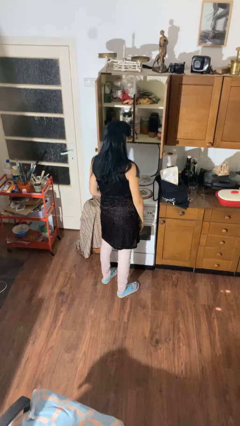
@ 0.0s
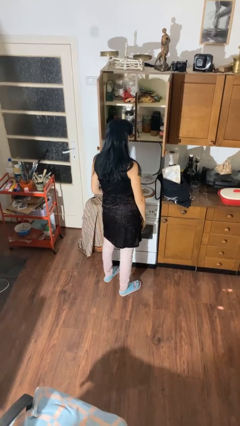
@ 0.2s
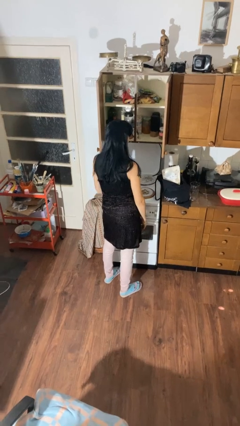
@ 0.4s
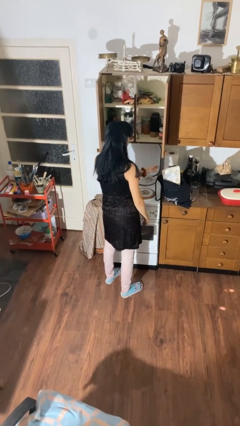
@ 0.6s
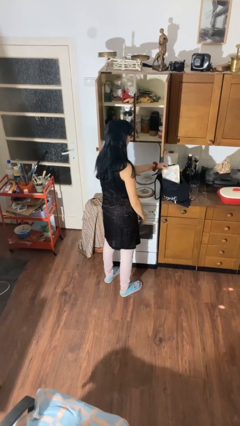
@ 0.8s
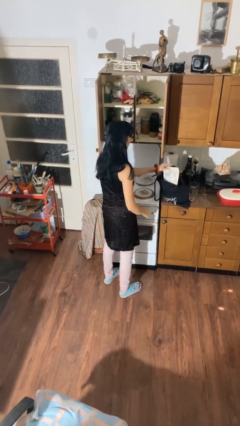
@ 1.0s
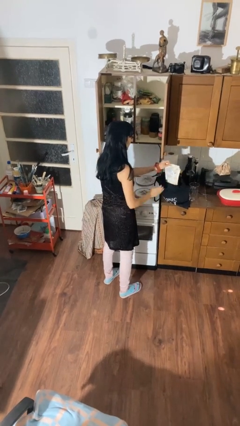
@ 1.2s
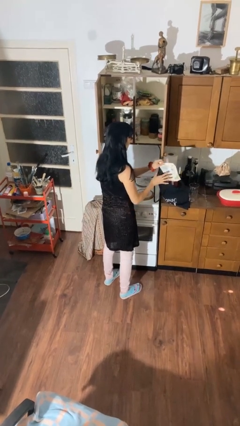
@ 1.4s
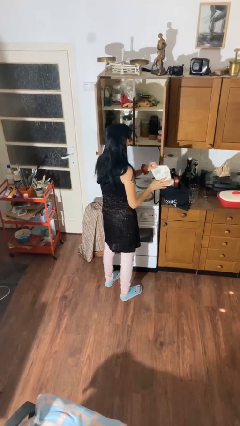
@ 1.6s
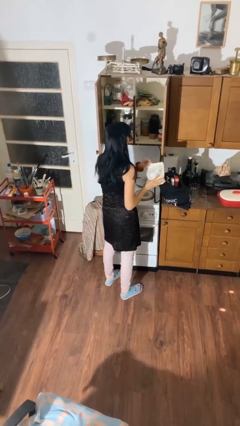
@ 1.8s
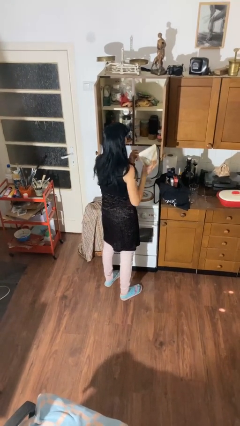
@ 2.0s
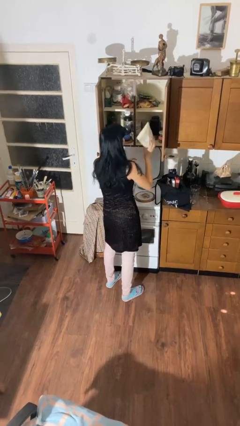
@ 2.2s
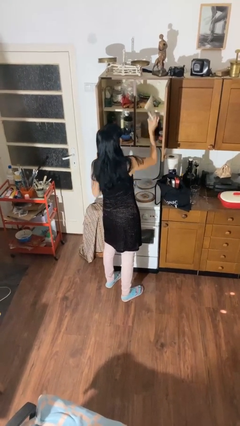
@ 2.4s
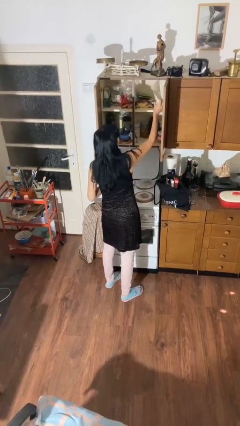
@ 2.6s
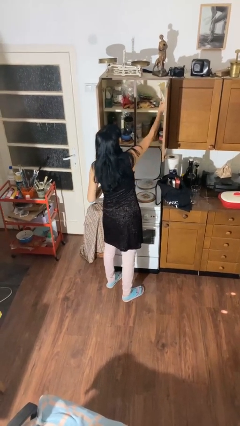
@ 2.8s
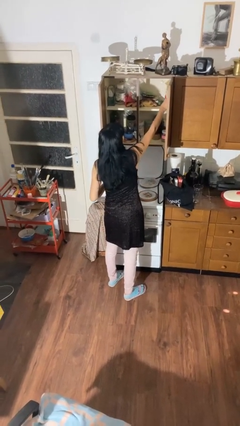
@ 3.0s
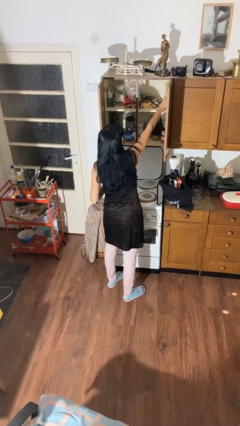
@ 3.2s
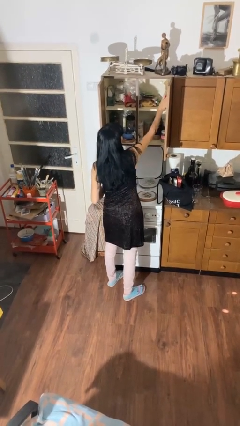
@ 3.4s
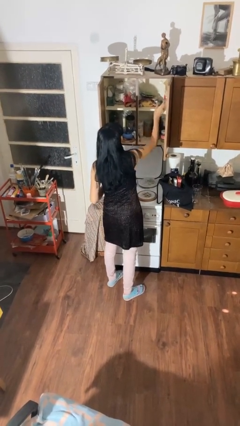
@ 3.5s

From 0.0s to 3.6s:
person loads groceries into cabinet

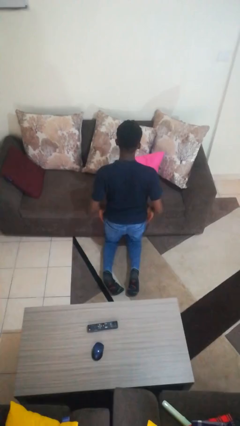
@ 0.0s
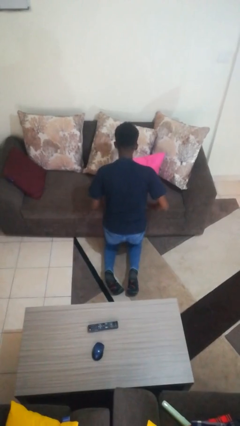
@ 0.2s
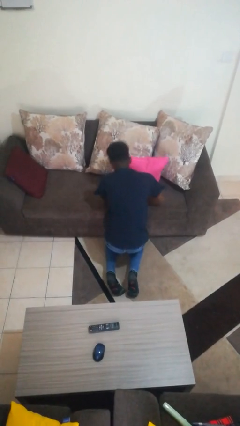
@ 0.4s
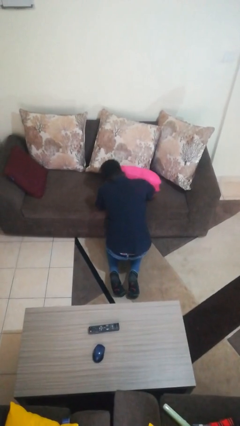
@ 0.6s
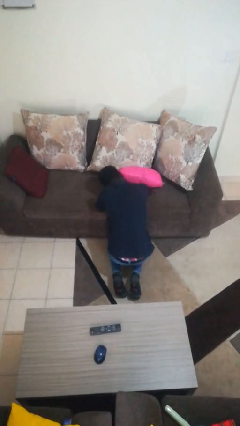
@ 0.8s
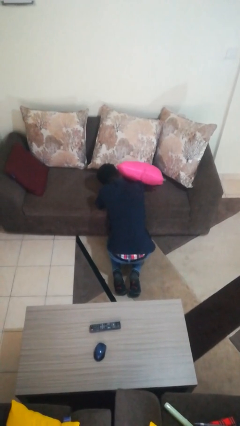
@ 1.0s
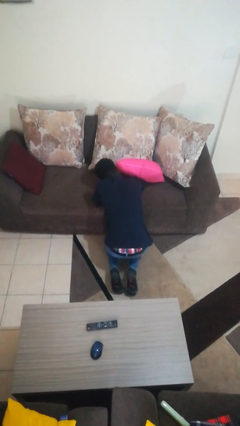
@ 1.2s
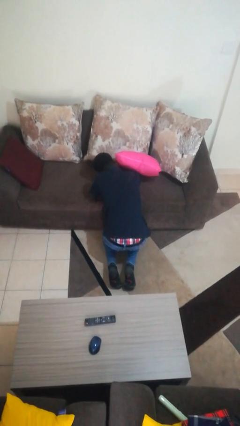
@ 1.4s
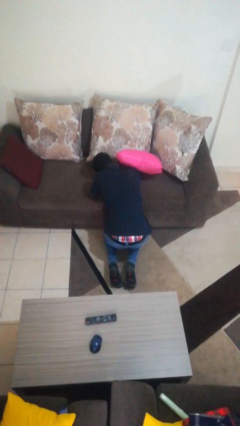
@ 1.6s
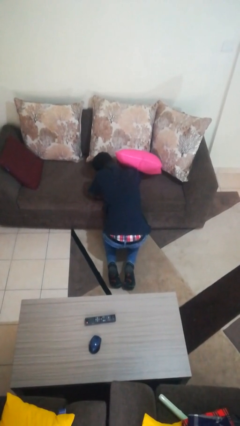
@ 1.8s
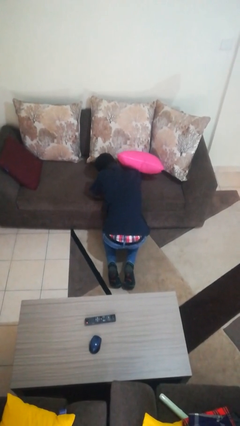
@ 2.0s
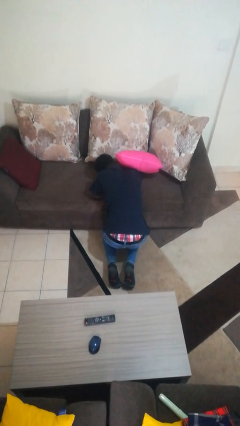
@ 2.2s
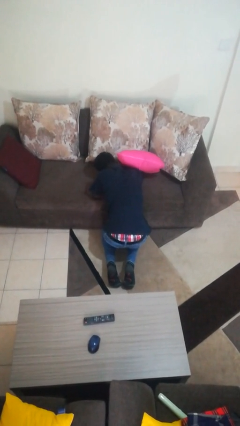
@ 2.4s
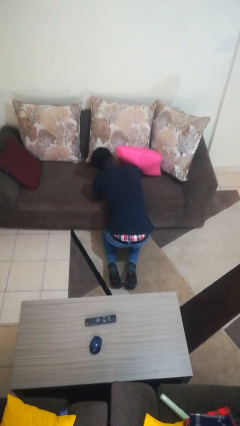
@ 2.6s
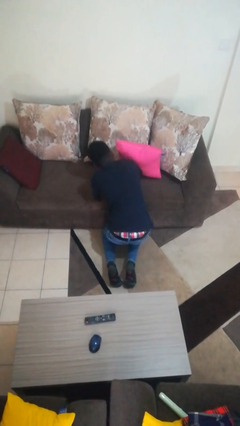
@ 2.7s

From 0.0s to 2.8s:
person searches in couch

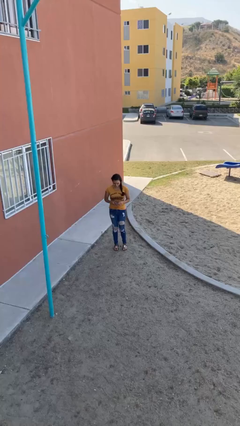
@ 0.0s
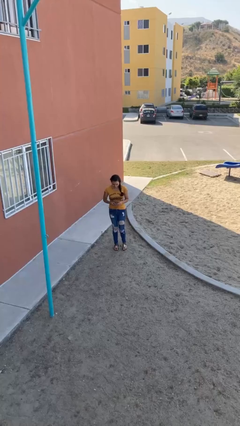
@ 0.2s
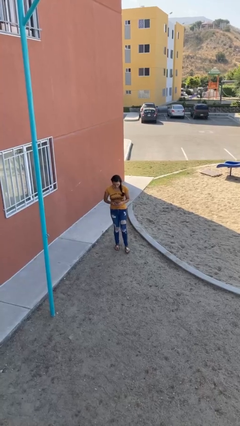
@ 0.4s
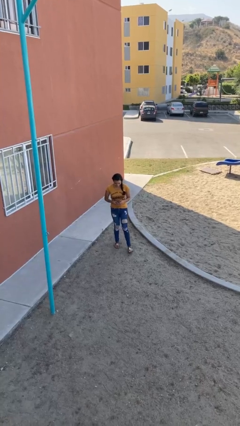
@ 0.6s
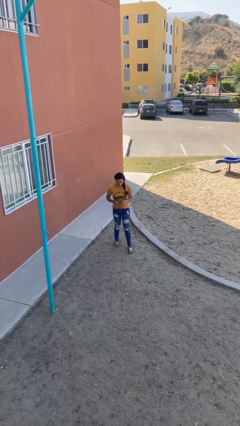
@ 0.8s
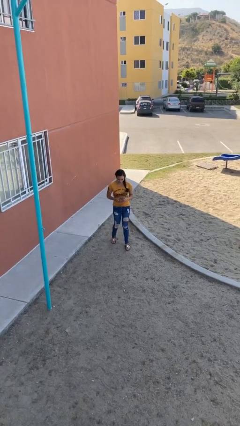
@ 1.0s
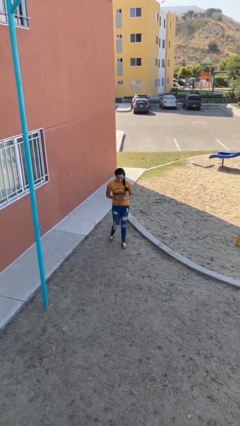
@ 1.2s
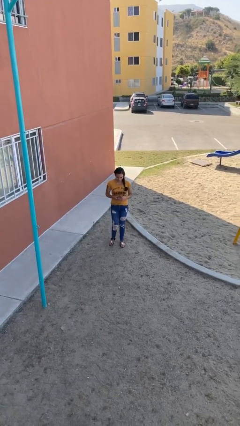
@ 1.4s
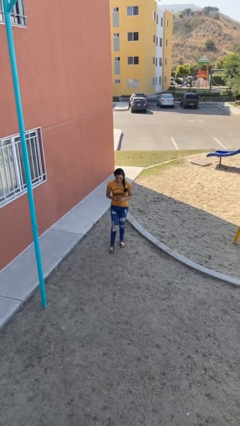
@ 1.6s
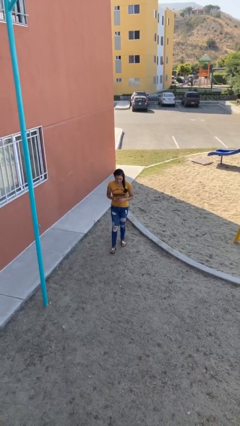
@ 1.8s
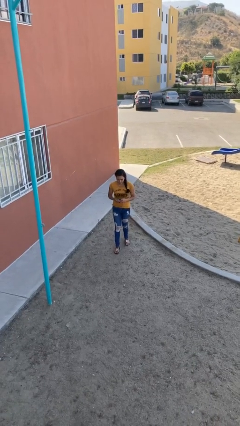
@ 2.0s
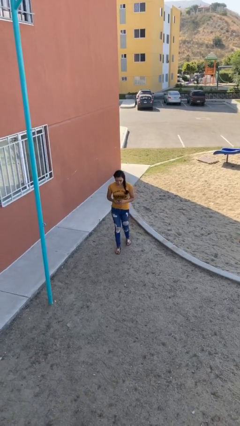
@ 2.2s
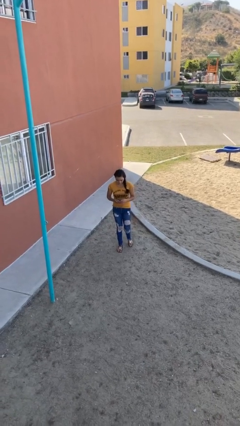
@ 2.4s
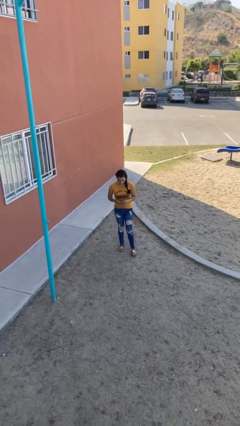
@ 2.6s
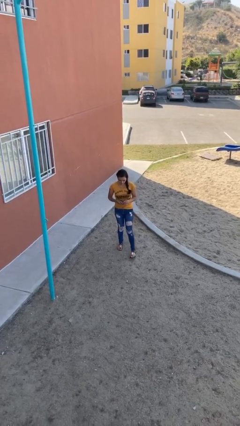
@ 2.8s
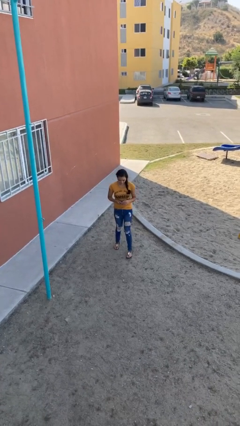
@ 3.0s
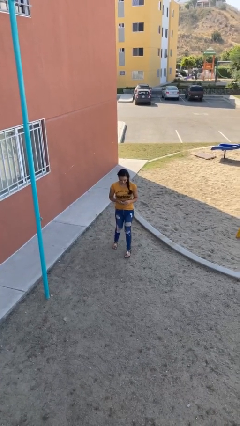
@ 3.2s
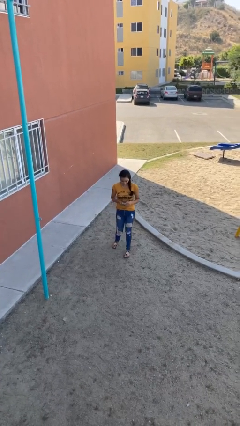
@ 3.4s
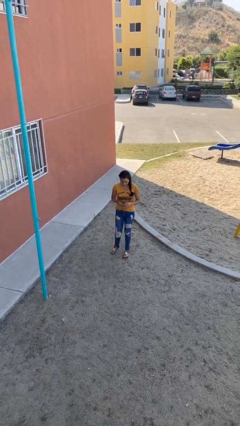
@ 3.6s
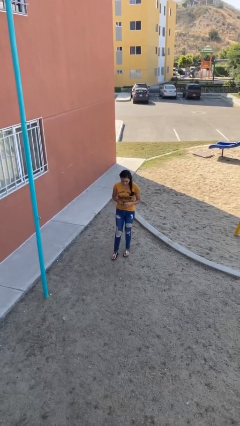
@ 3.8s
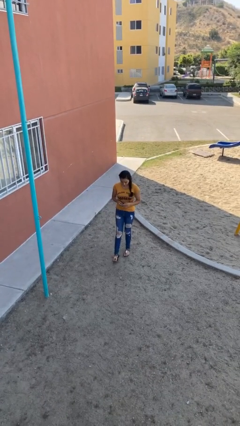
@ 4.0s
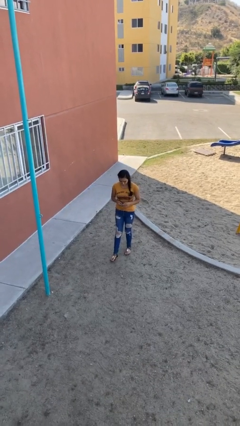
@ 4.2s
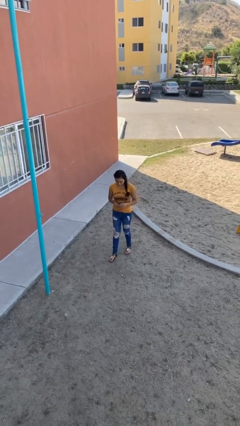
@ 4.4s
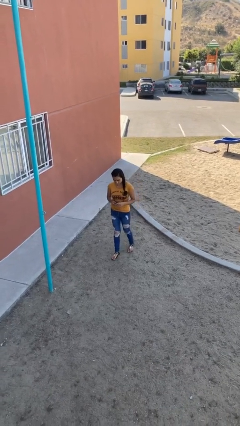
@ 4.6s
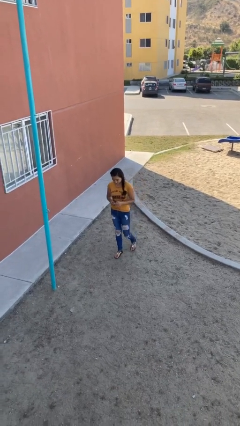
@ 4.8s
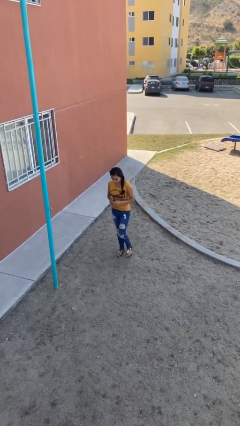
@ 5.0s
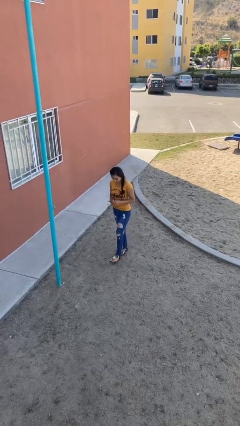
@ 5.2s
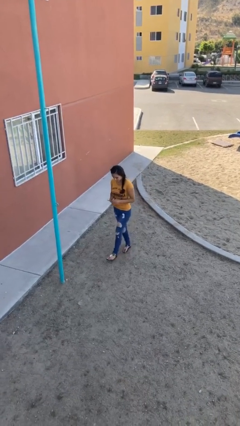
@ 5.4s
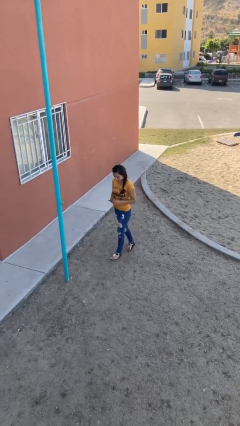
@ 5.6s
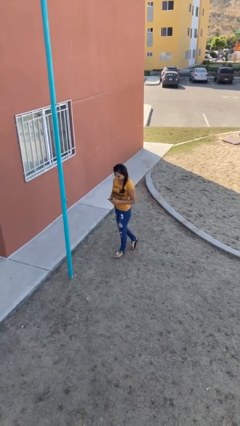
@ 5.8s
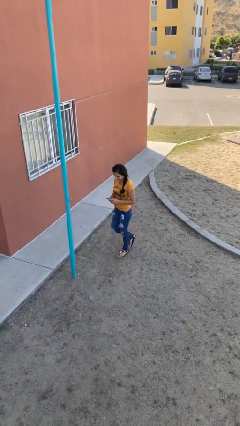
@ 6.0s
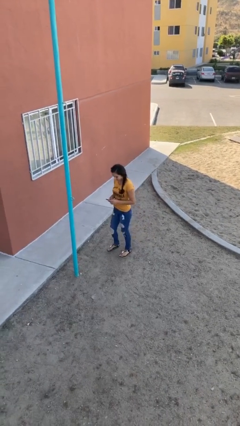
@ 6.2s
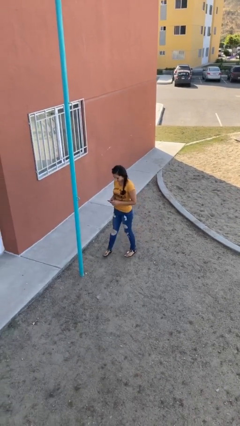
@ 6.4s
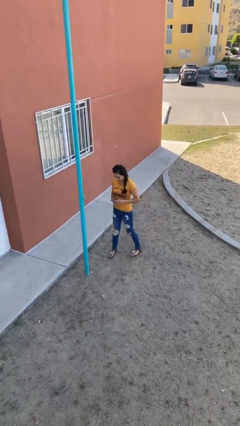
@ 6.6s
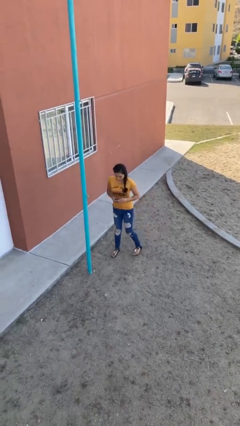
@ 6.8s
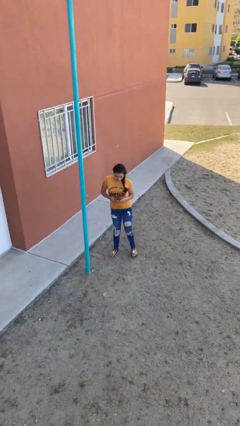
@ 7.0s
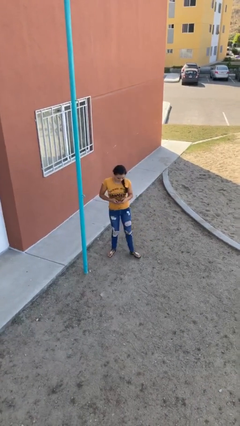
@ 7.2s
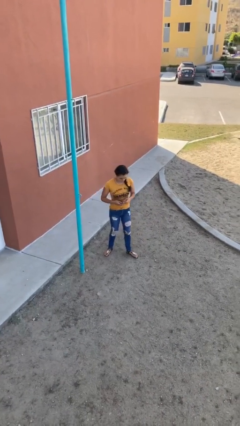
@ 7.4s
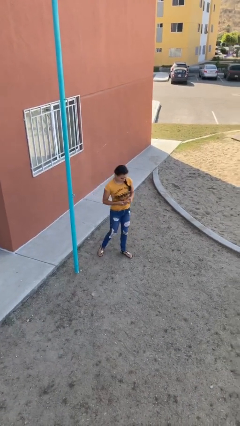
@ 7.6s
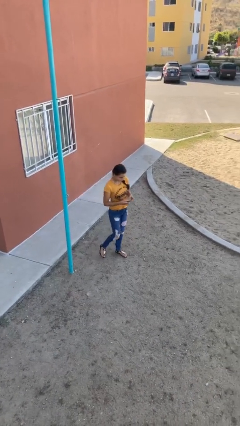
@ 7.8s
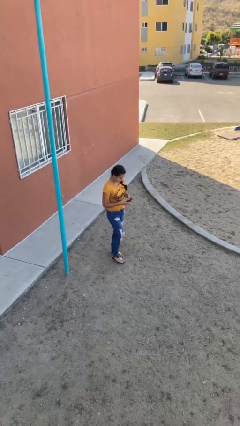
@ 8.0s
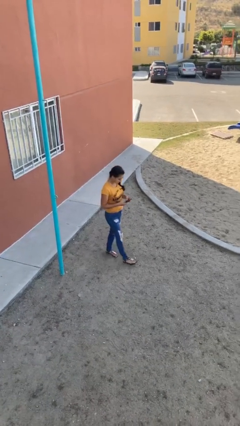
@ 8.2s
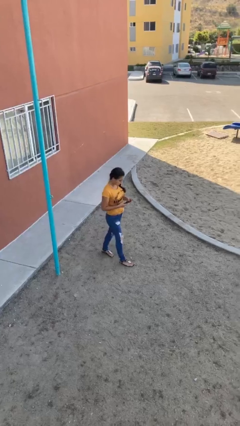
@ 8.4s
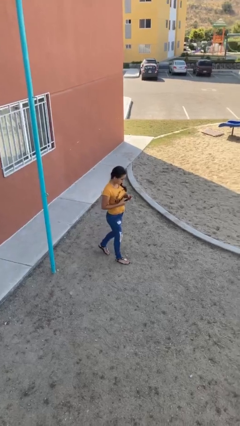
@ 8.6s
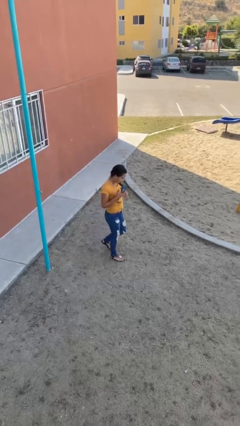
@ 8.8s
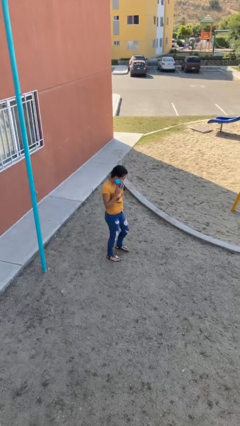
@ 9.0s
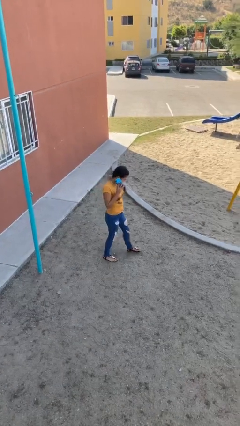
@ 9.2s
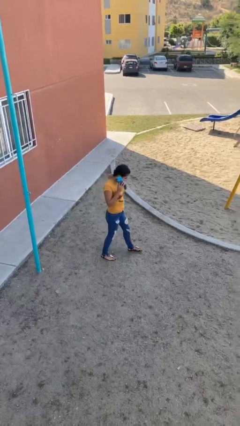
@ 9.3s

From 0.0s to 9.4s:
person texts on phone

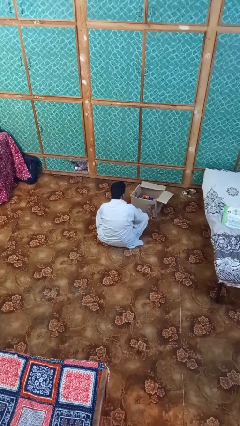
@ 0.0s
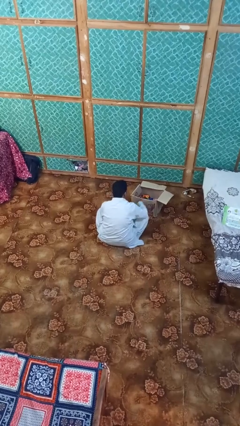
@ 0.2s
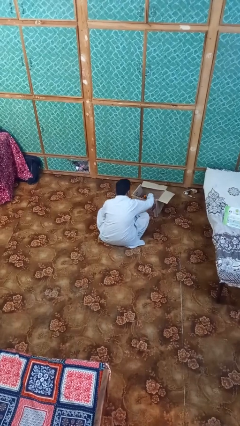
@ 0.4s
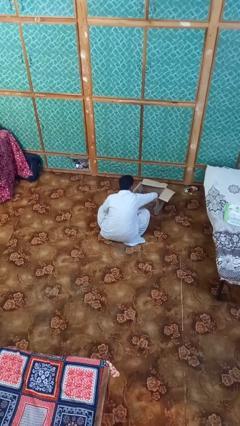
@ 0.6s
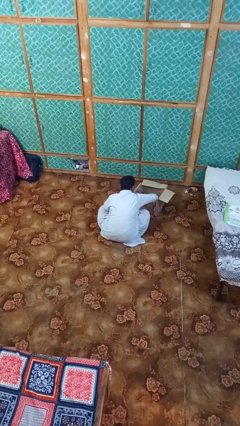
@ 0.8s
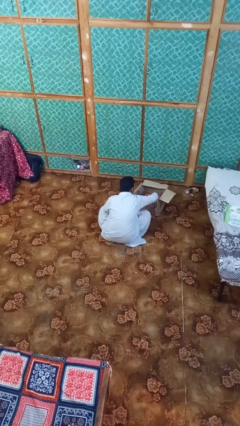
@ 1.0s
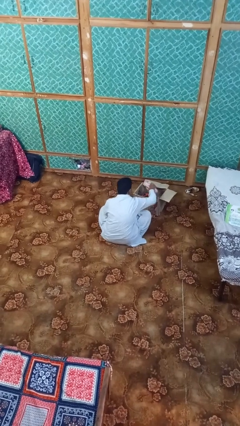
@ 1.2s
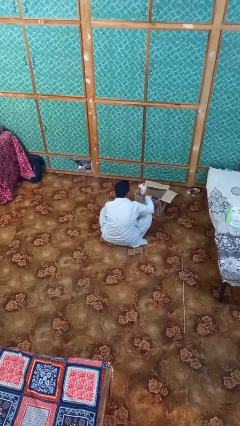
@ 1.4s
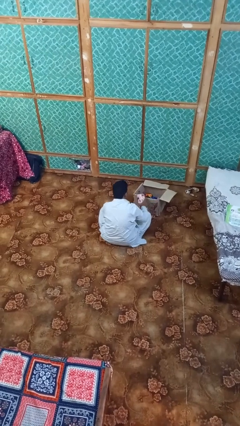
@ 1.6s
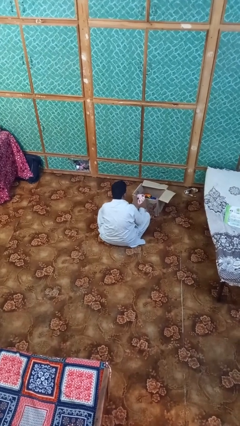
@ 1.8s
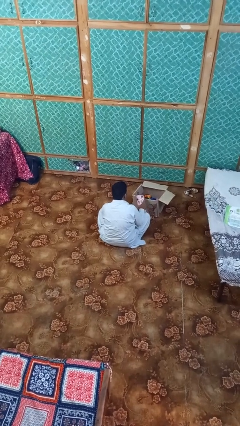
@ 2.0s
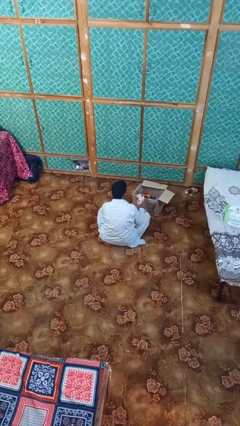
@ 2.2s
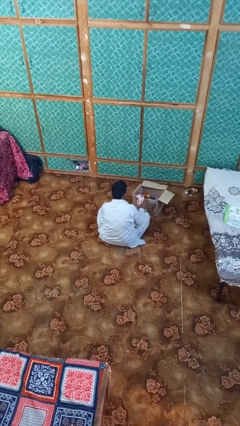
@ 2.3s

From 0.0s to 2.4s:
person takes object from box
